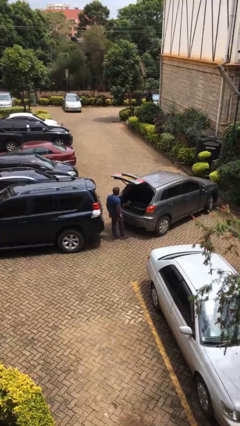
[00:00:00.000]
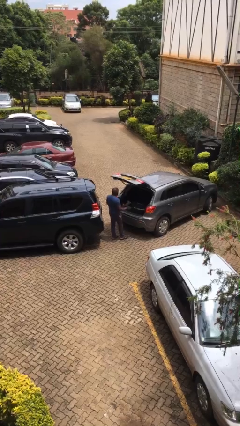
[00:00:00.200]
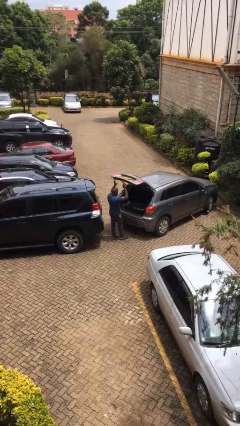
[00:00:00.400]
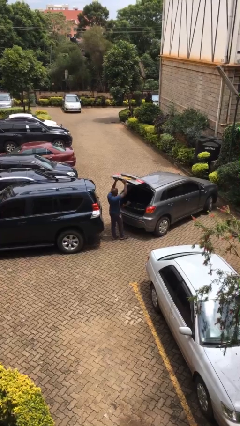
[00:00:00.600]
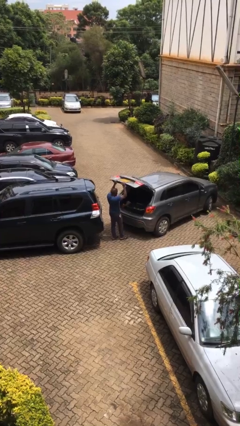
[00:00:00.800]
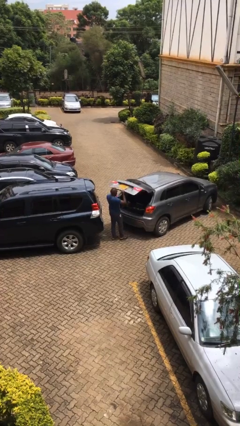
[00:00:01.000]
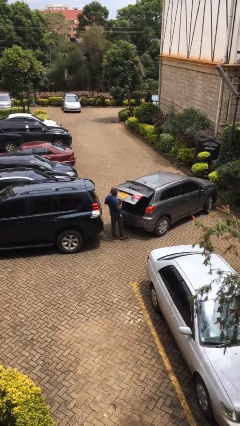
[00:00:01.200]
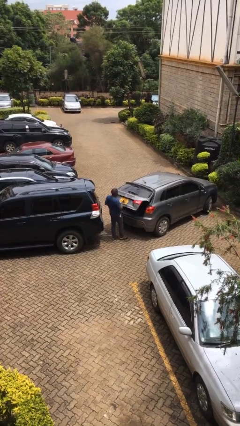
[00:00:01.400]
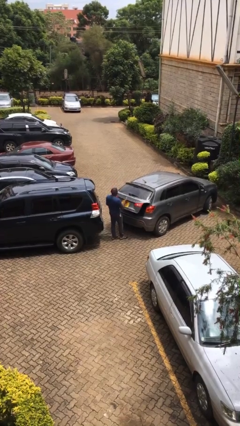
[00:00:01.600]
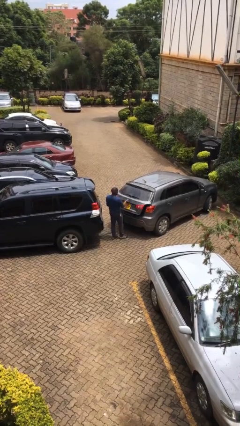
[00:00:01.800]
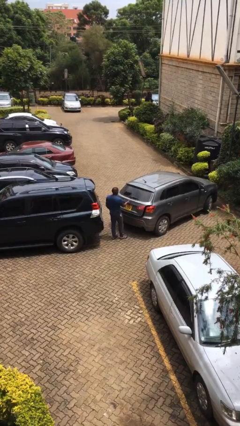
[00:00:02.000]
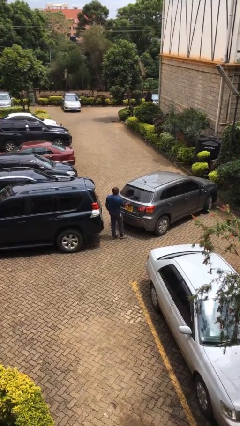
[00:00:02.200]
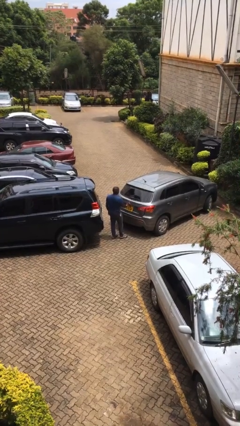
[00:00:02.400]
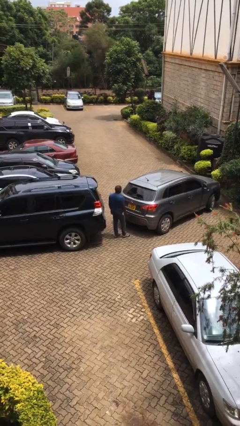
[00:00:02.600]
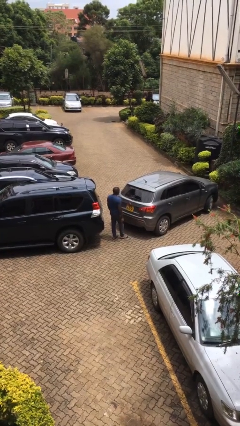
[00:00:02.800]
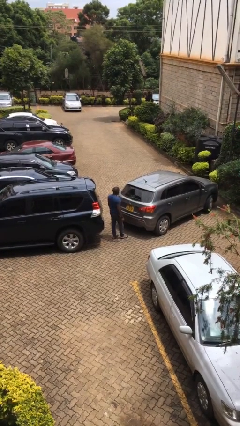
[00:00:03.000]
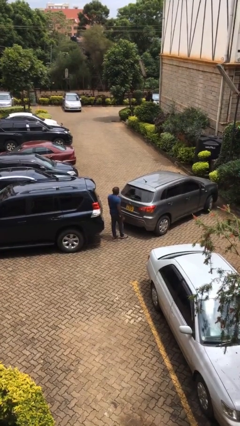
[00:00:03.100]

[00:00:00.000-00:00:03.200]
person closes car trunk

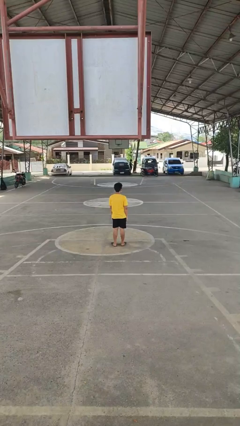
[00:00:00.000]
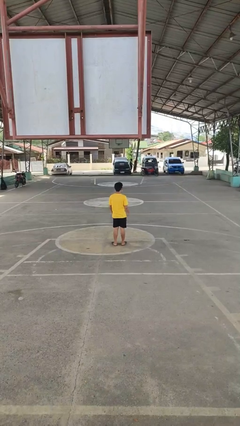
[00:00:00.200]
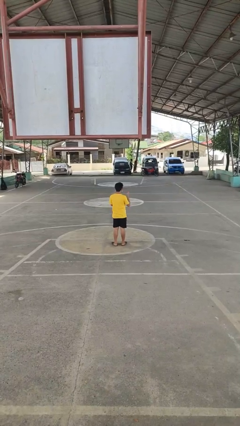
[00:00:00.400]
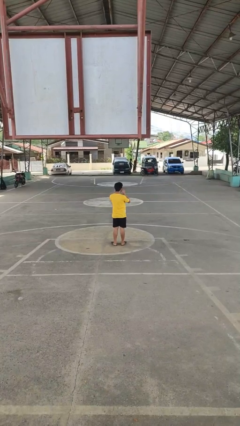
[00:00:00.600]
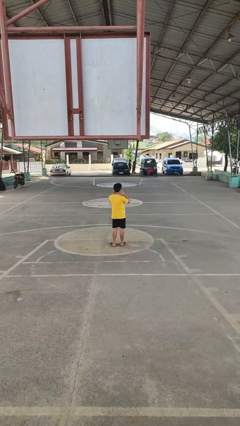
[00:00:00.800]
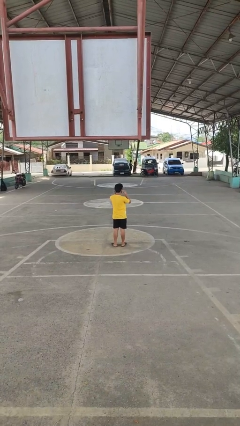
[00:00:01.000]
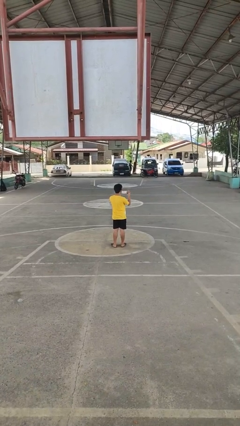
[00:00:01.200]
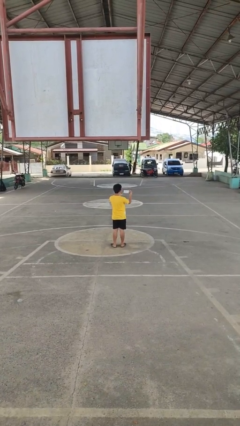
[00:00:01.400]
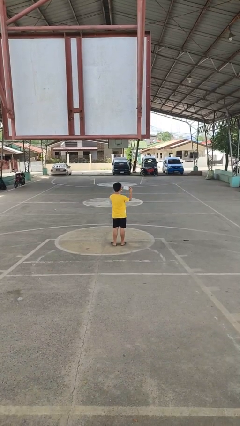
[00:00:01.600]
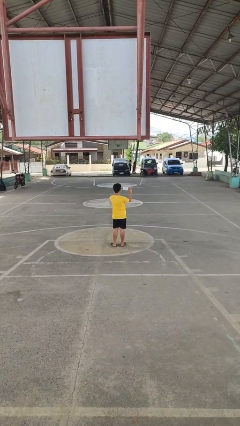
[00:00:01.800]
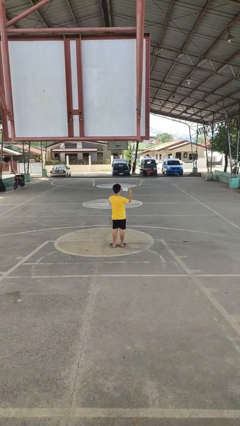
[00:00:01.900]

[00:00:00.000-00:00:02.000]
person takes off facemask

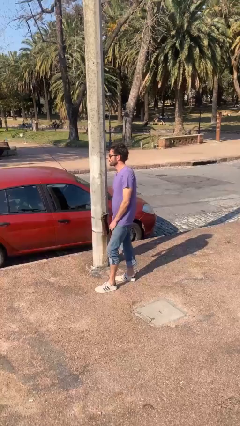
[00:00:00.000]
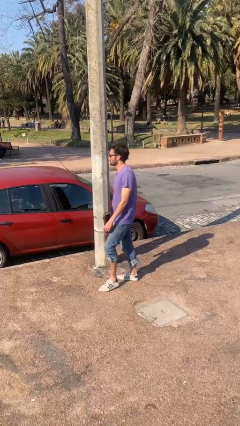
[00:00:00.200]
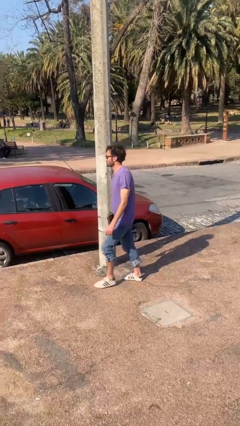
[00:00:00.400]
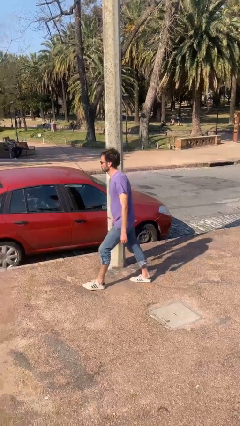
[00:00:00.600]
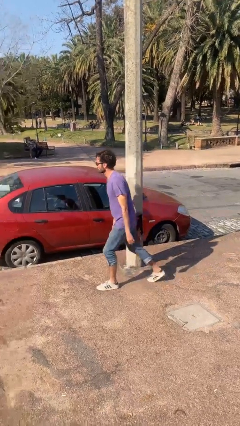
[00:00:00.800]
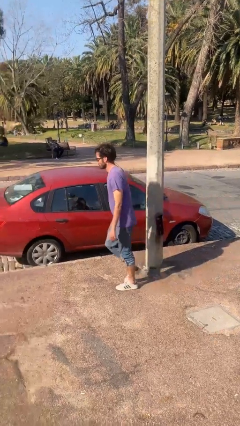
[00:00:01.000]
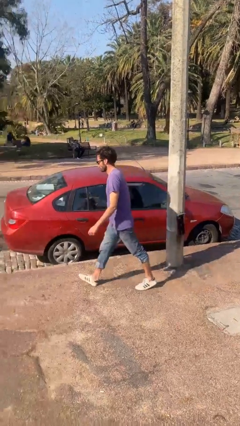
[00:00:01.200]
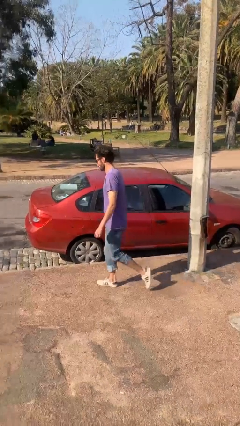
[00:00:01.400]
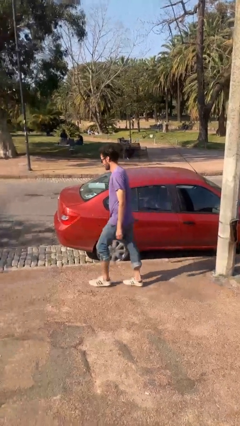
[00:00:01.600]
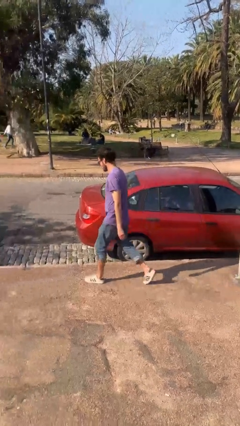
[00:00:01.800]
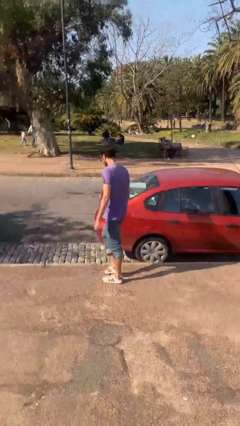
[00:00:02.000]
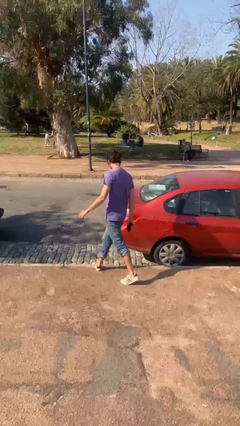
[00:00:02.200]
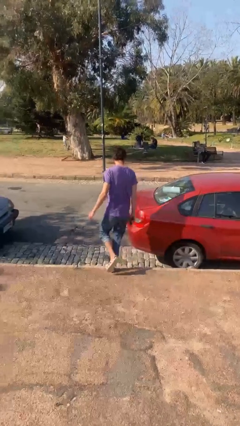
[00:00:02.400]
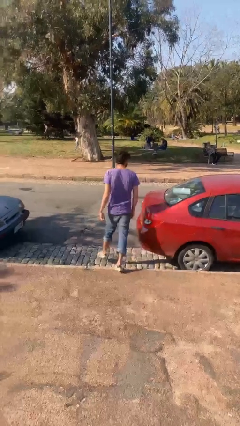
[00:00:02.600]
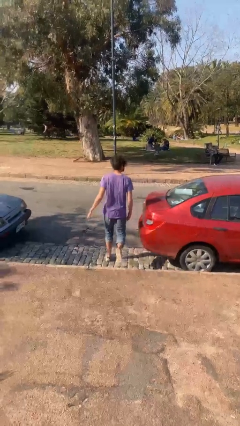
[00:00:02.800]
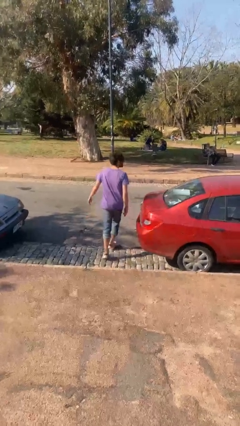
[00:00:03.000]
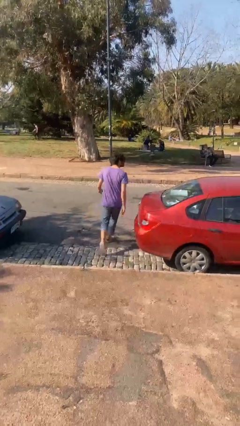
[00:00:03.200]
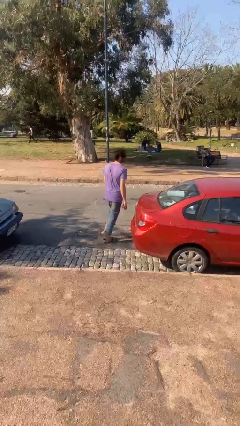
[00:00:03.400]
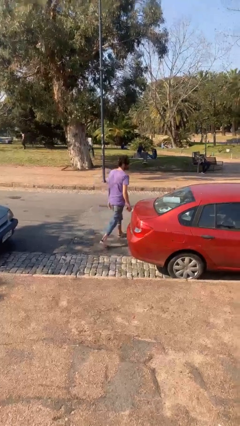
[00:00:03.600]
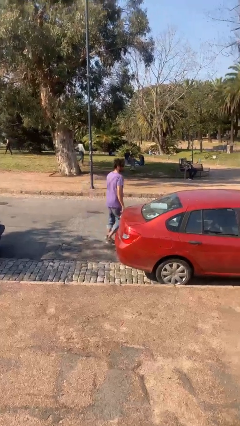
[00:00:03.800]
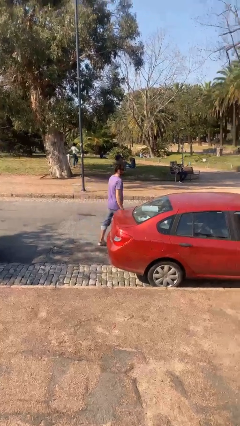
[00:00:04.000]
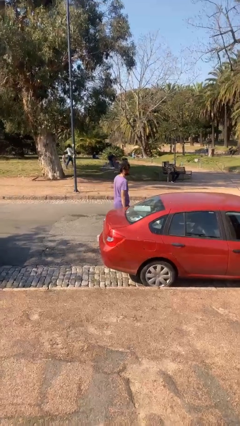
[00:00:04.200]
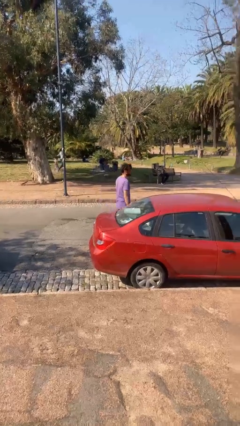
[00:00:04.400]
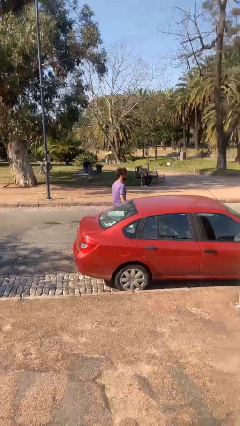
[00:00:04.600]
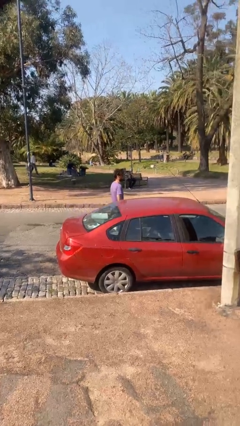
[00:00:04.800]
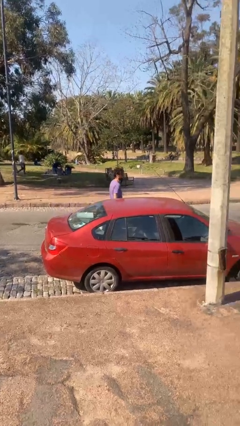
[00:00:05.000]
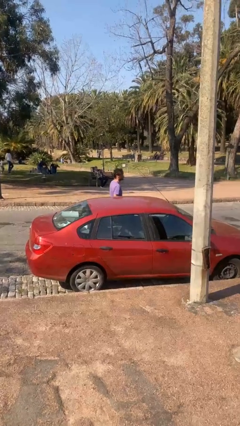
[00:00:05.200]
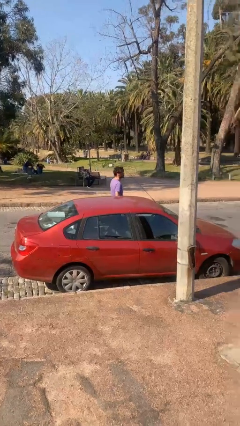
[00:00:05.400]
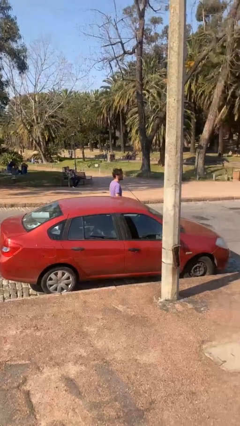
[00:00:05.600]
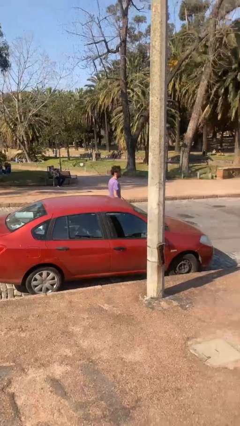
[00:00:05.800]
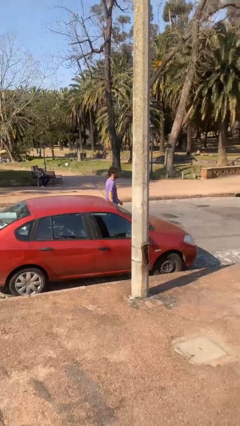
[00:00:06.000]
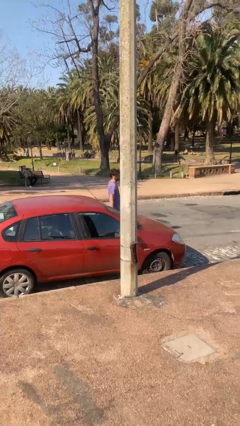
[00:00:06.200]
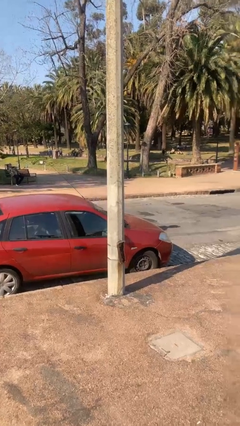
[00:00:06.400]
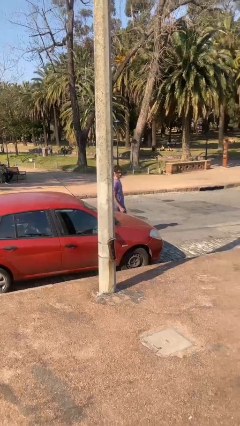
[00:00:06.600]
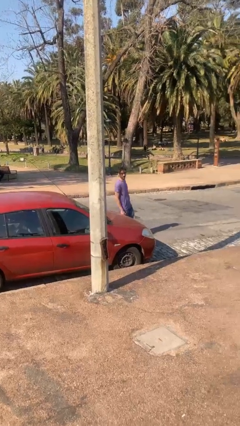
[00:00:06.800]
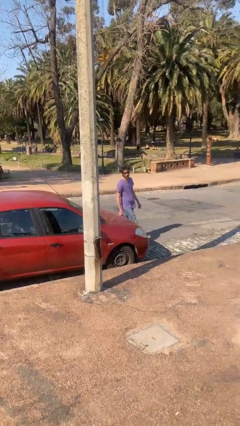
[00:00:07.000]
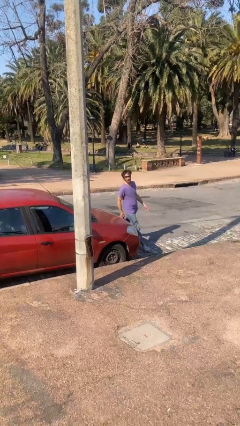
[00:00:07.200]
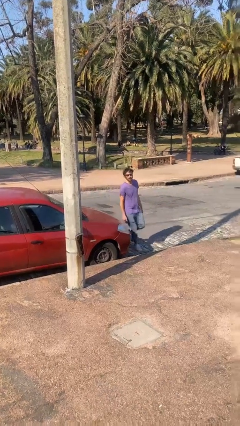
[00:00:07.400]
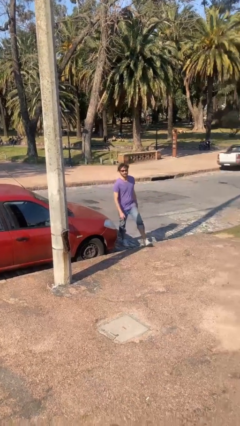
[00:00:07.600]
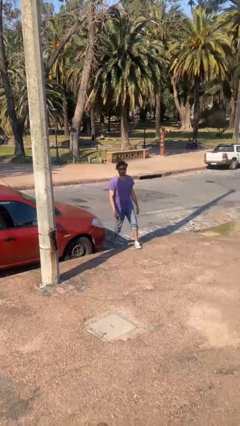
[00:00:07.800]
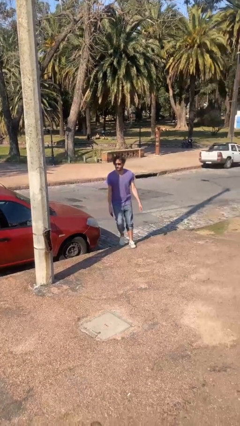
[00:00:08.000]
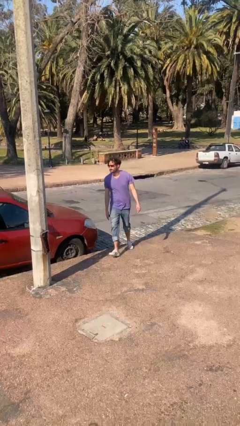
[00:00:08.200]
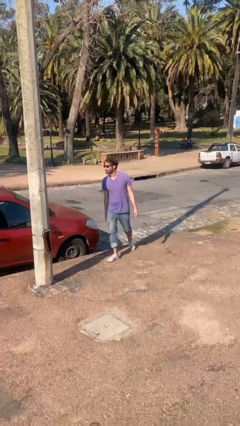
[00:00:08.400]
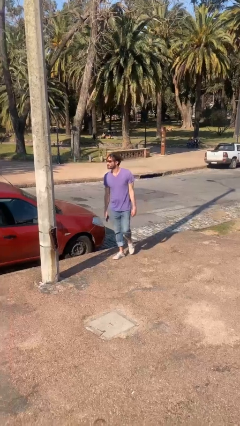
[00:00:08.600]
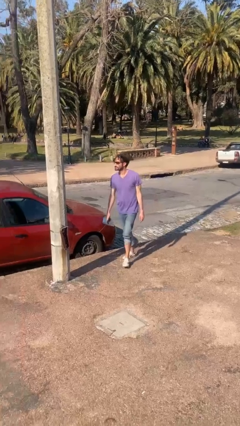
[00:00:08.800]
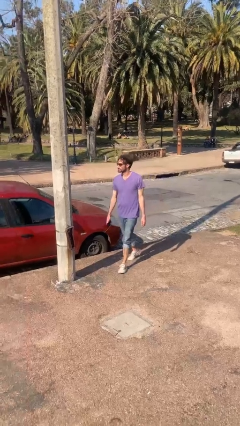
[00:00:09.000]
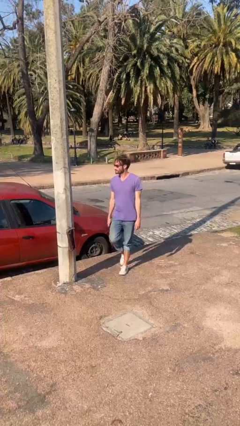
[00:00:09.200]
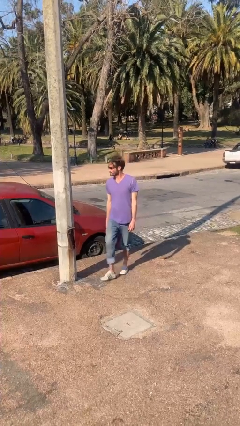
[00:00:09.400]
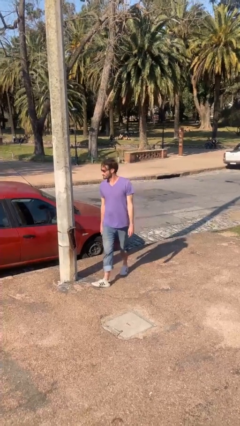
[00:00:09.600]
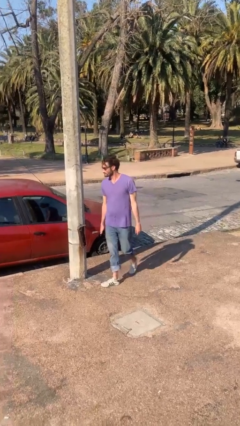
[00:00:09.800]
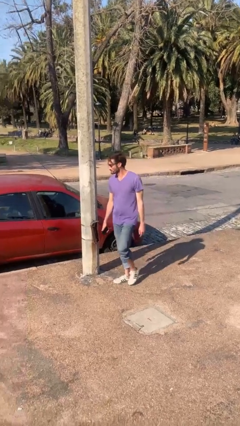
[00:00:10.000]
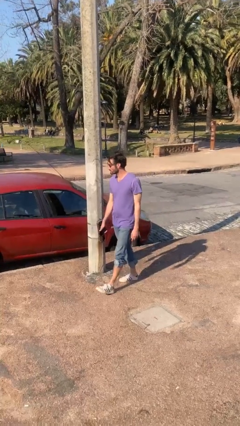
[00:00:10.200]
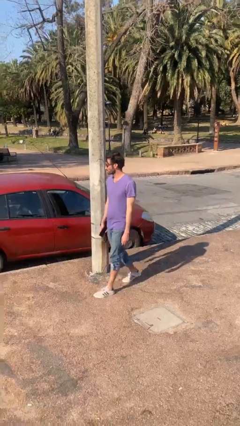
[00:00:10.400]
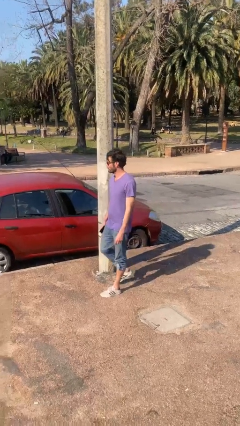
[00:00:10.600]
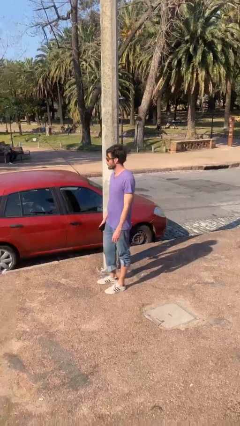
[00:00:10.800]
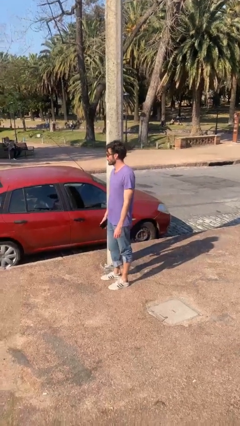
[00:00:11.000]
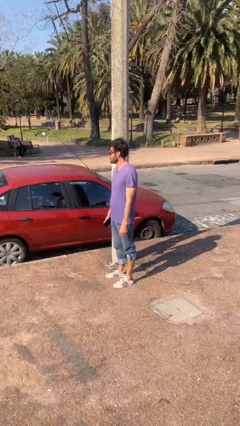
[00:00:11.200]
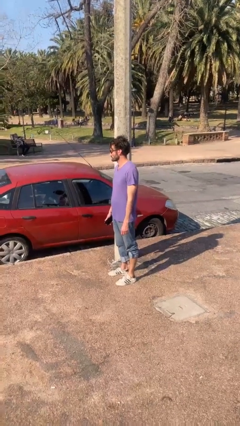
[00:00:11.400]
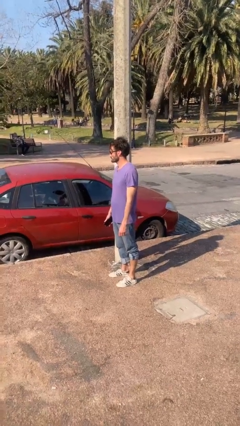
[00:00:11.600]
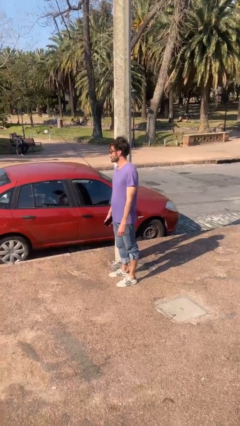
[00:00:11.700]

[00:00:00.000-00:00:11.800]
person walks around car

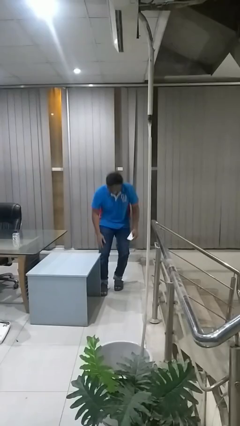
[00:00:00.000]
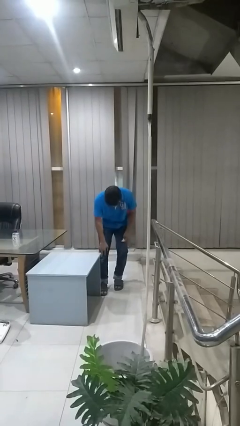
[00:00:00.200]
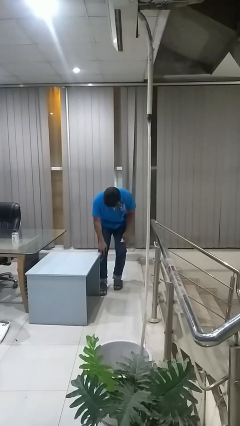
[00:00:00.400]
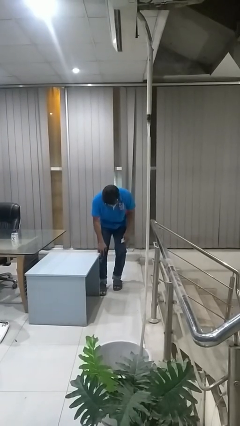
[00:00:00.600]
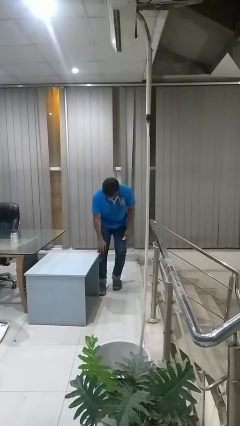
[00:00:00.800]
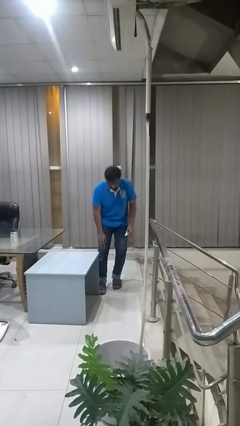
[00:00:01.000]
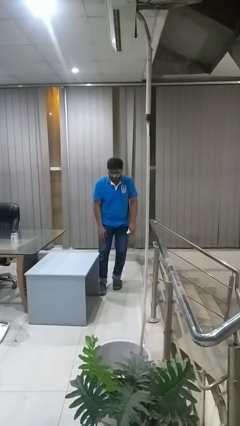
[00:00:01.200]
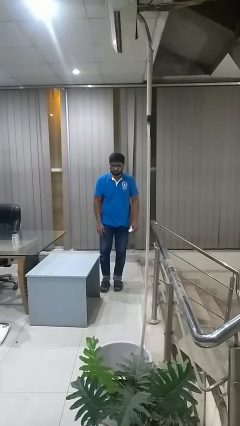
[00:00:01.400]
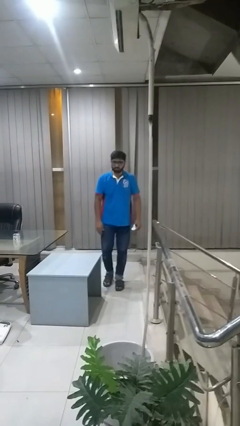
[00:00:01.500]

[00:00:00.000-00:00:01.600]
person bumps into table
